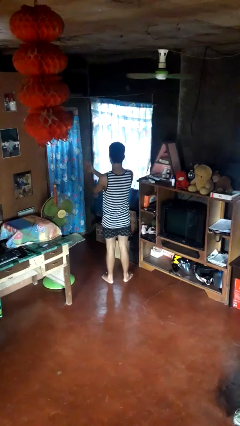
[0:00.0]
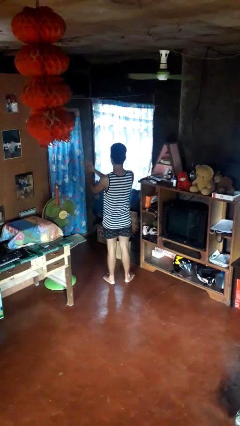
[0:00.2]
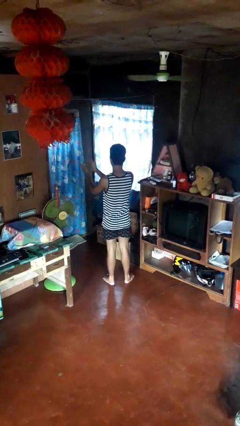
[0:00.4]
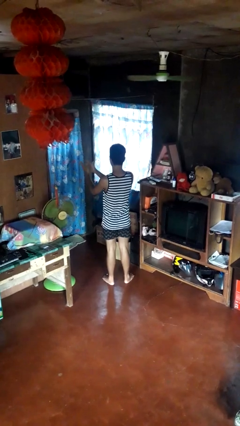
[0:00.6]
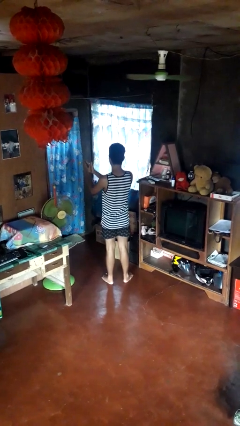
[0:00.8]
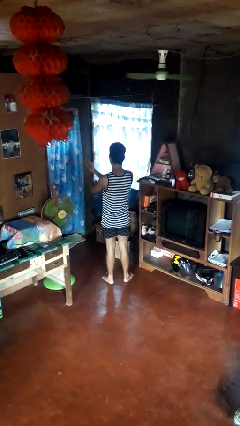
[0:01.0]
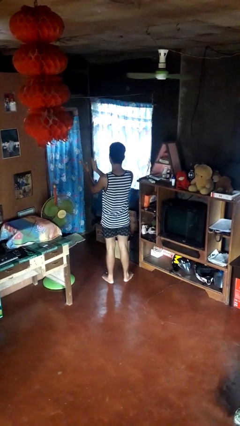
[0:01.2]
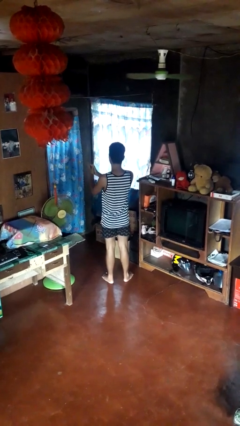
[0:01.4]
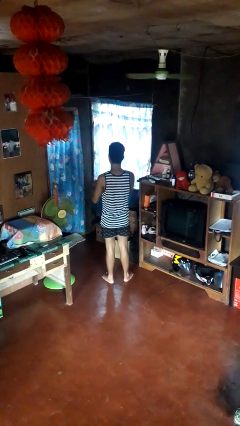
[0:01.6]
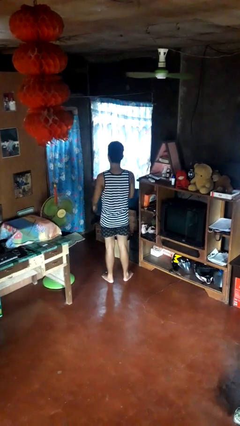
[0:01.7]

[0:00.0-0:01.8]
person claps hands

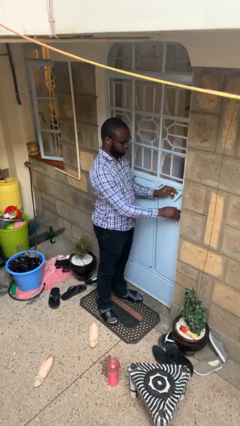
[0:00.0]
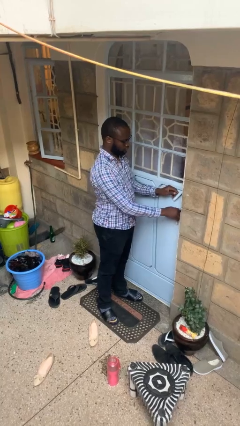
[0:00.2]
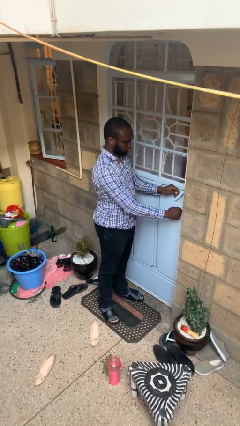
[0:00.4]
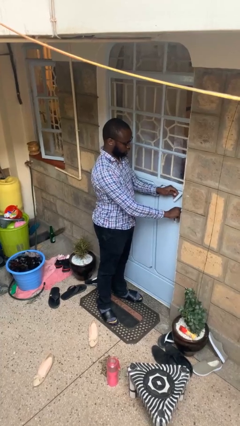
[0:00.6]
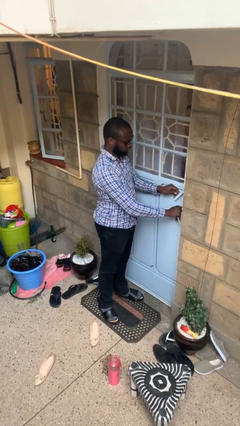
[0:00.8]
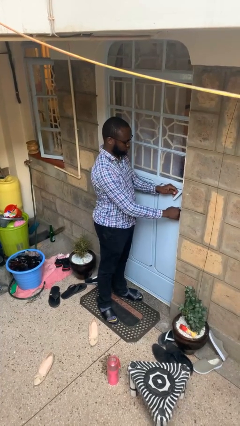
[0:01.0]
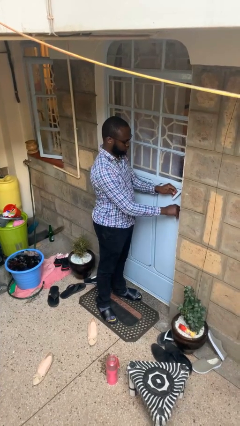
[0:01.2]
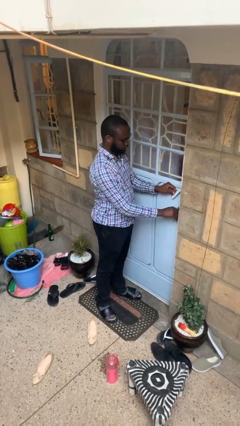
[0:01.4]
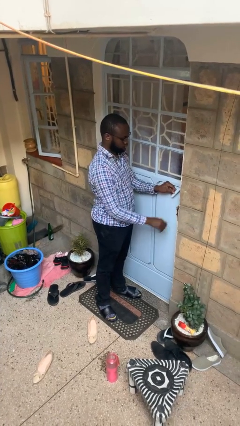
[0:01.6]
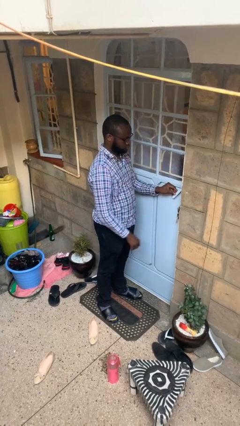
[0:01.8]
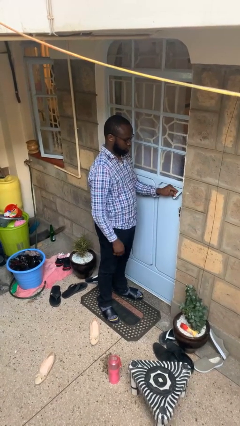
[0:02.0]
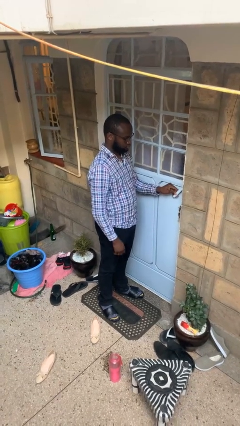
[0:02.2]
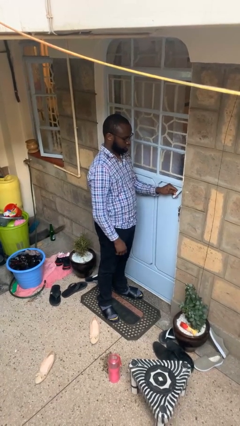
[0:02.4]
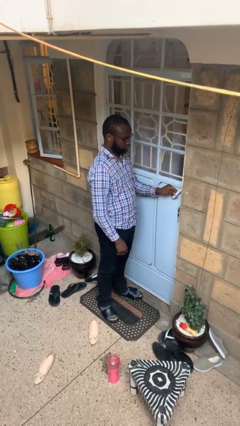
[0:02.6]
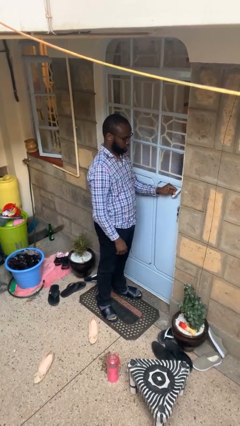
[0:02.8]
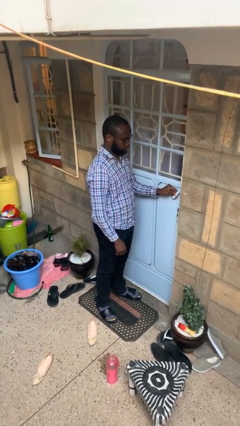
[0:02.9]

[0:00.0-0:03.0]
person unlocks door with keys

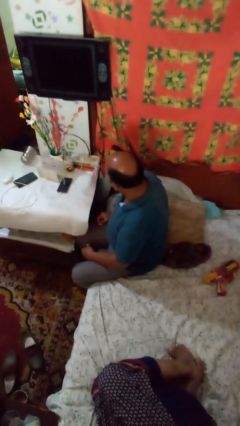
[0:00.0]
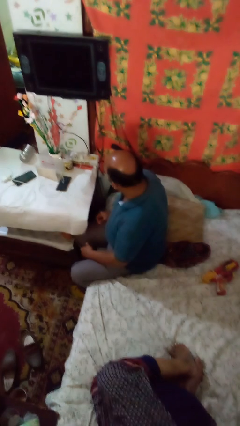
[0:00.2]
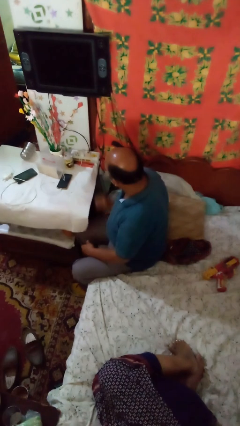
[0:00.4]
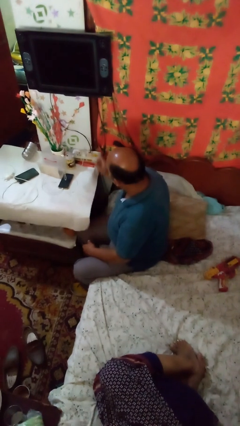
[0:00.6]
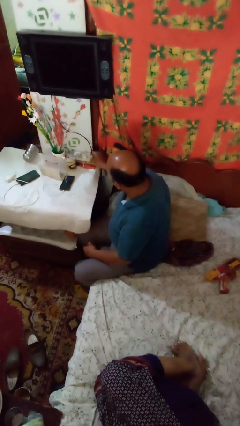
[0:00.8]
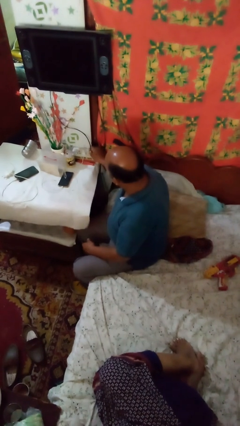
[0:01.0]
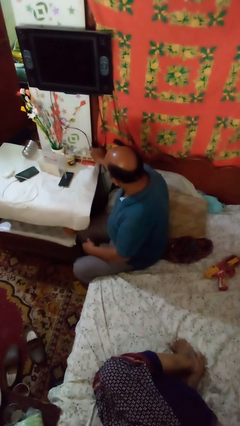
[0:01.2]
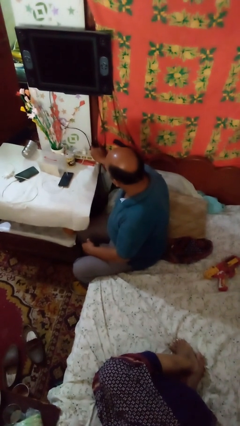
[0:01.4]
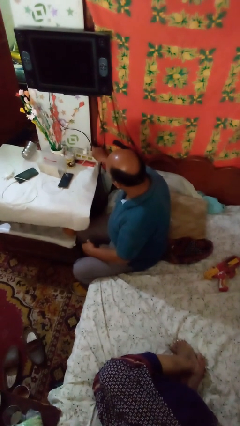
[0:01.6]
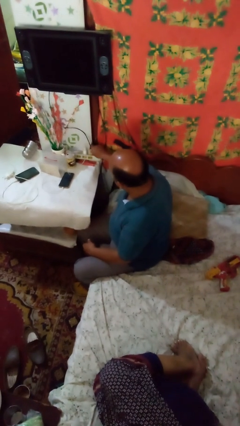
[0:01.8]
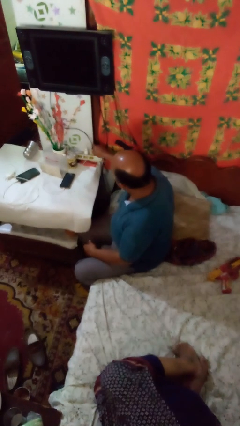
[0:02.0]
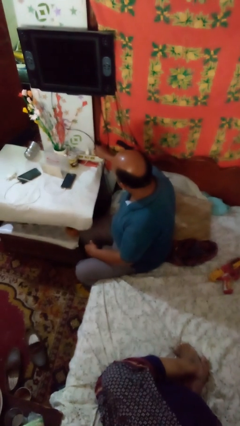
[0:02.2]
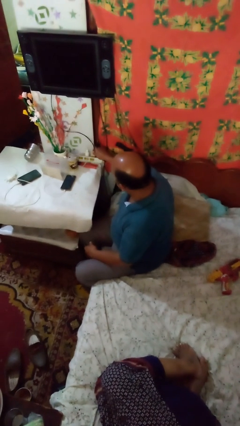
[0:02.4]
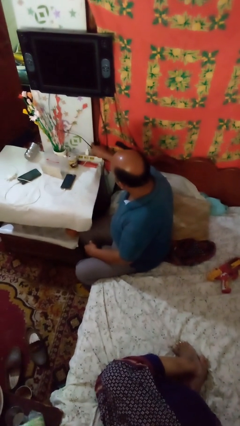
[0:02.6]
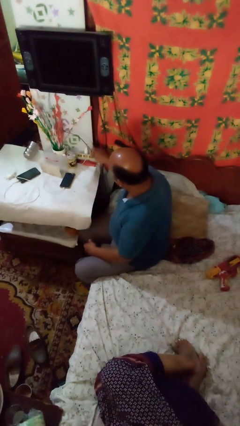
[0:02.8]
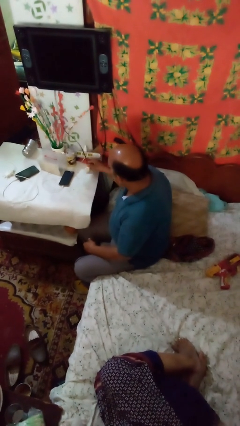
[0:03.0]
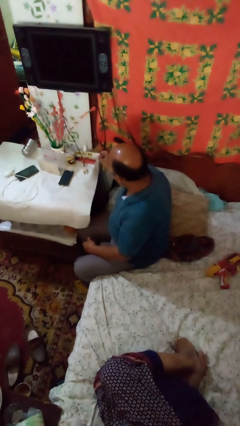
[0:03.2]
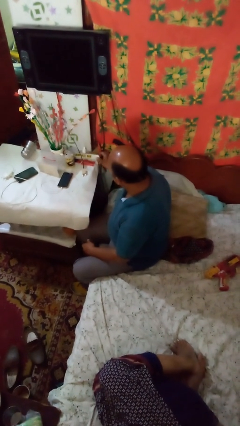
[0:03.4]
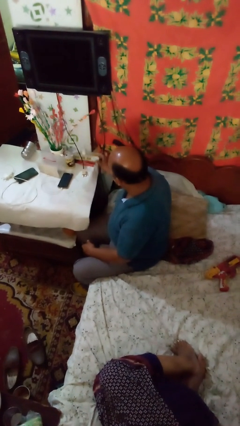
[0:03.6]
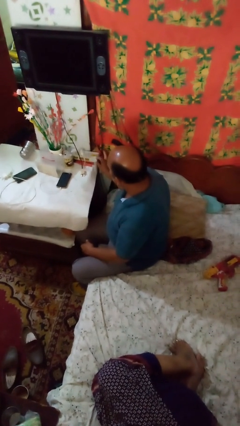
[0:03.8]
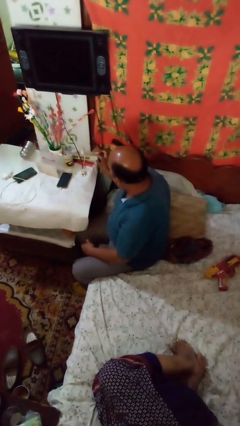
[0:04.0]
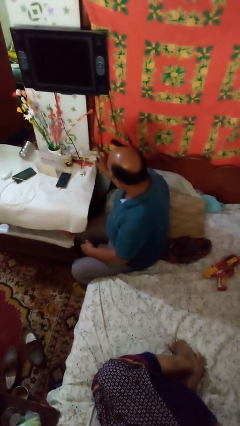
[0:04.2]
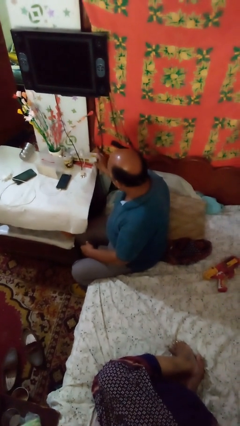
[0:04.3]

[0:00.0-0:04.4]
person unplugs from electrical socket

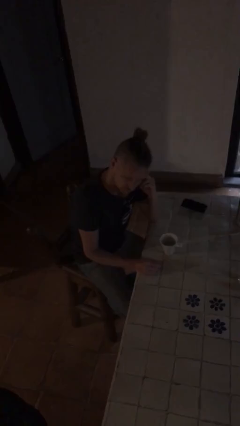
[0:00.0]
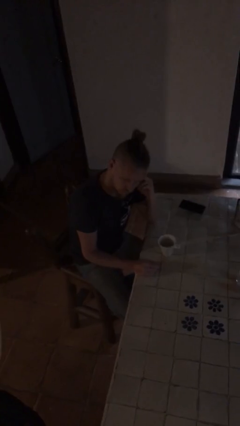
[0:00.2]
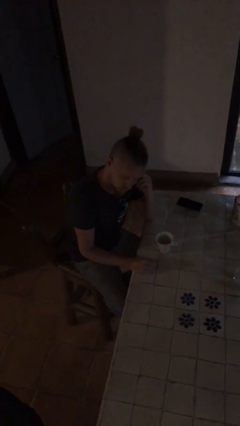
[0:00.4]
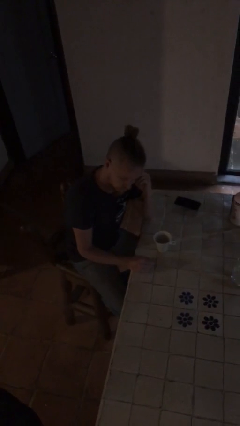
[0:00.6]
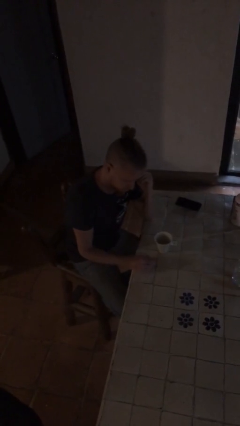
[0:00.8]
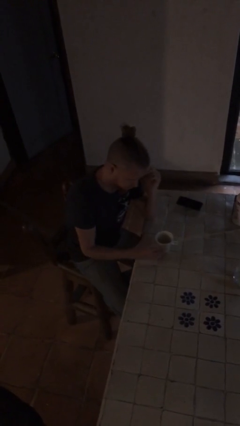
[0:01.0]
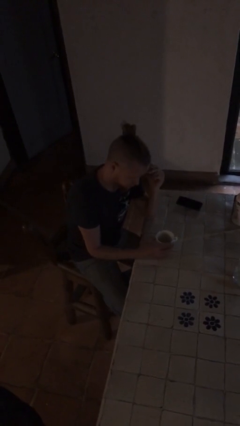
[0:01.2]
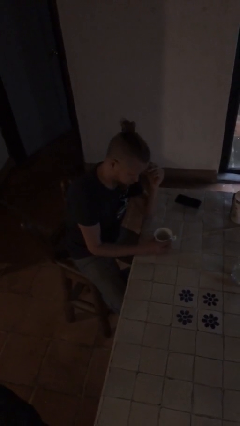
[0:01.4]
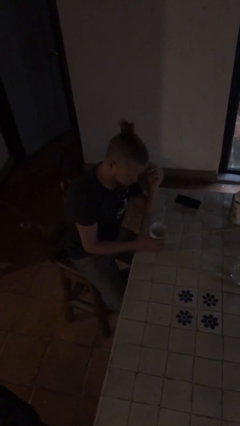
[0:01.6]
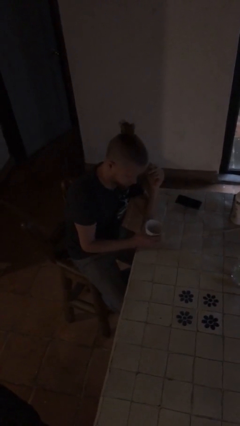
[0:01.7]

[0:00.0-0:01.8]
person picks up object from table

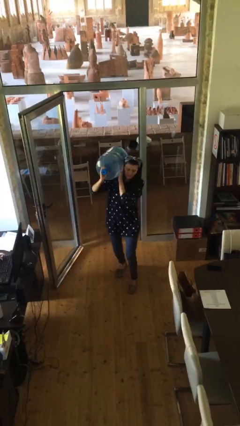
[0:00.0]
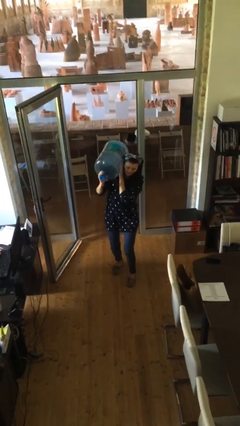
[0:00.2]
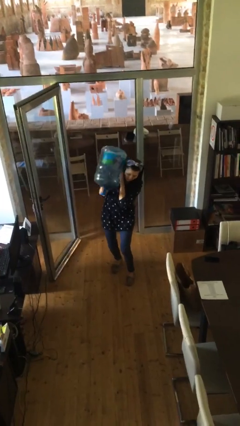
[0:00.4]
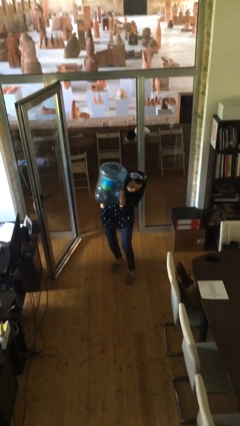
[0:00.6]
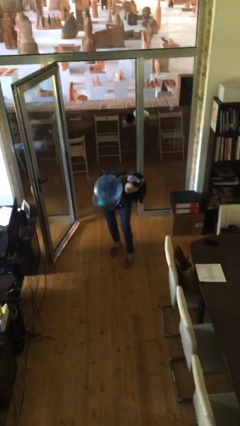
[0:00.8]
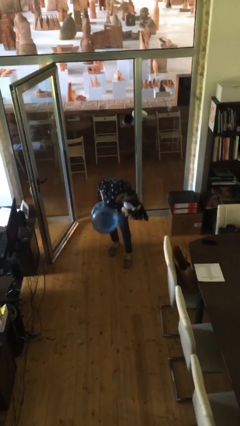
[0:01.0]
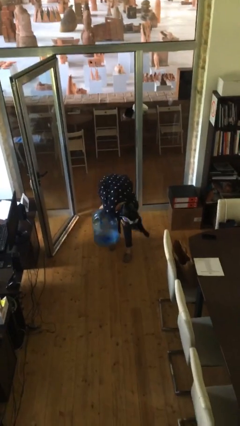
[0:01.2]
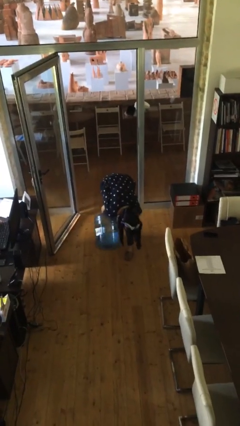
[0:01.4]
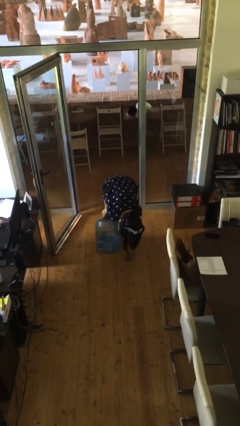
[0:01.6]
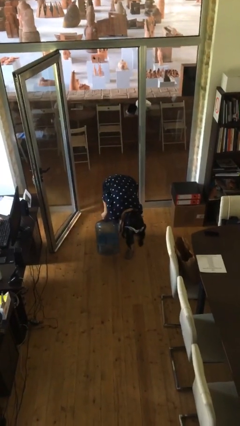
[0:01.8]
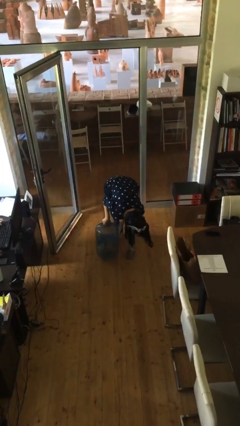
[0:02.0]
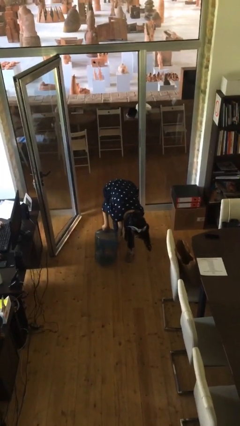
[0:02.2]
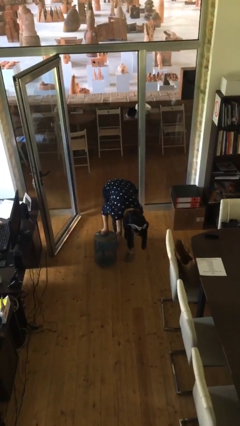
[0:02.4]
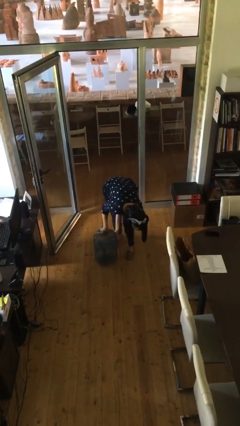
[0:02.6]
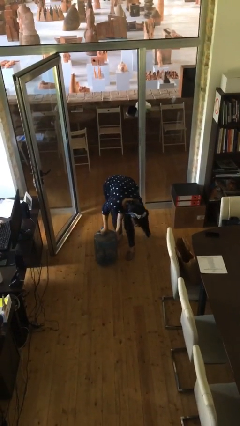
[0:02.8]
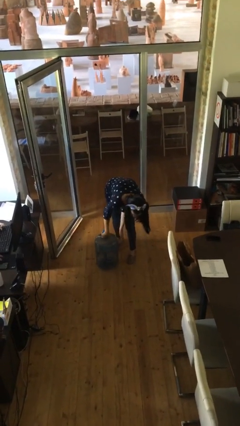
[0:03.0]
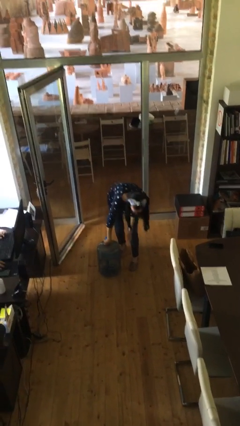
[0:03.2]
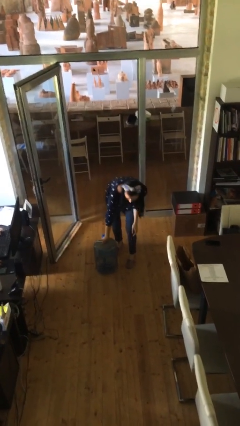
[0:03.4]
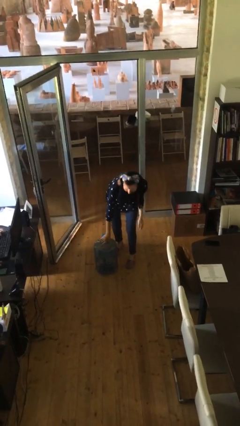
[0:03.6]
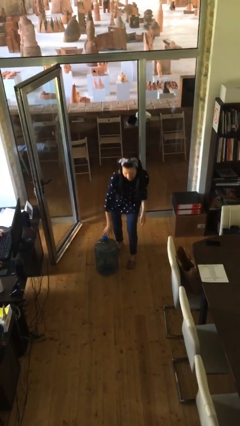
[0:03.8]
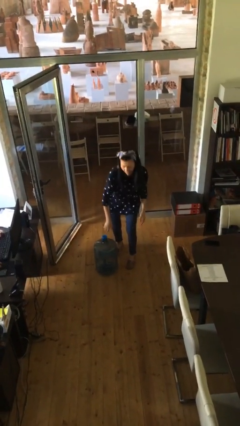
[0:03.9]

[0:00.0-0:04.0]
person puts down object on floor

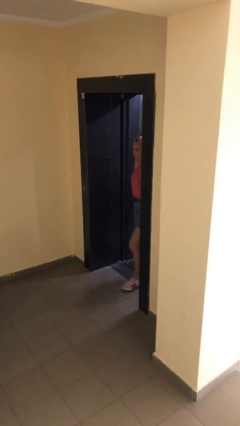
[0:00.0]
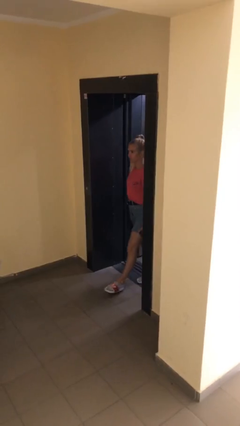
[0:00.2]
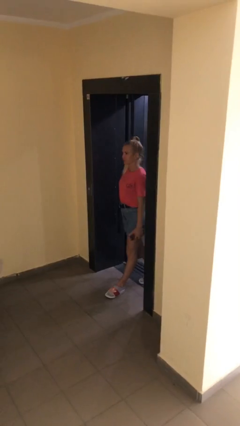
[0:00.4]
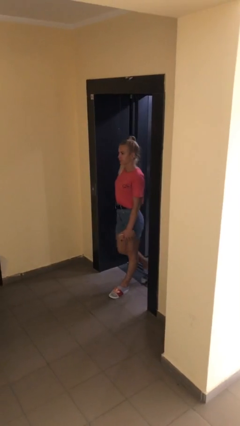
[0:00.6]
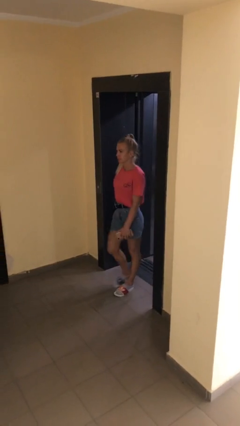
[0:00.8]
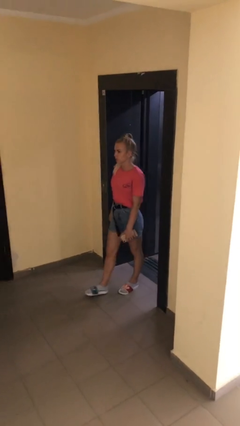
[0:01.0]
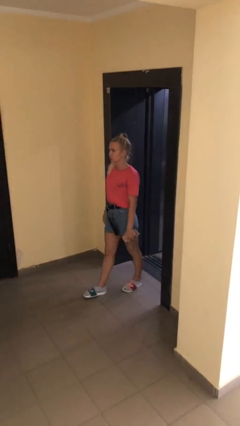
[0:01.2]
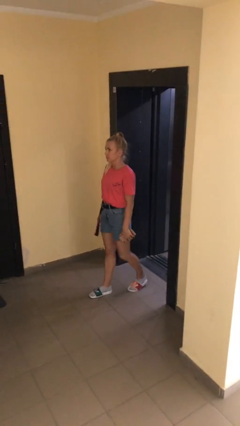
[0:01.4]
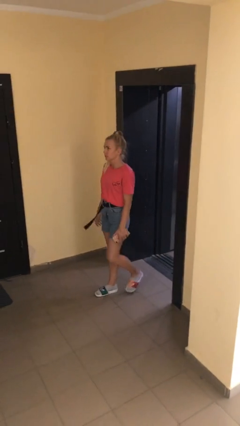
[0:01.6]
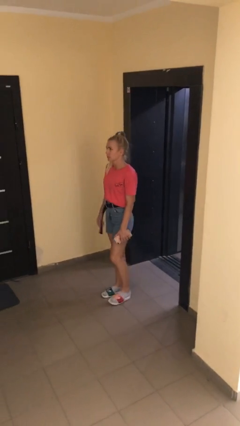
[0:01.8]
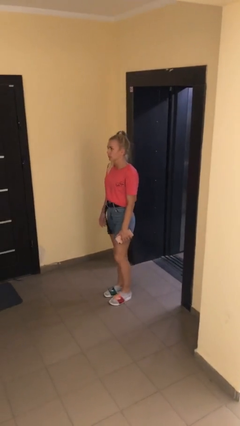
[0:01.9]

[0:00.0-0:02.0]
person enters scene through structure

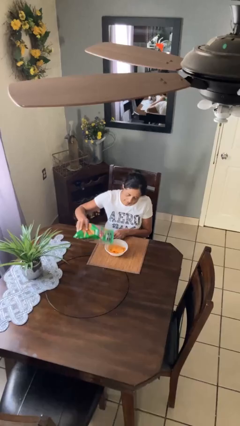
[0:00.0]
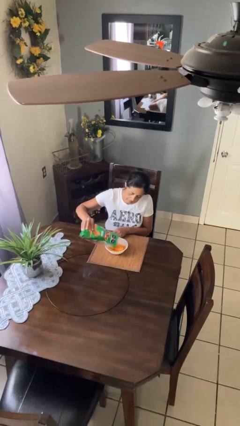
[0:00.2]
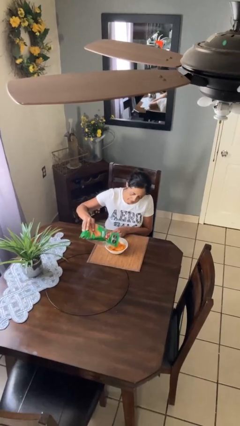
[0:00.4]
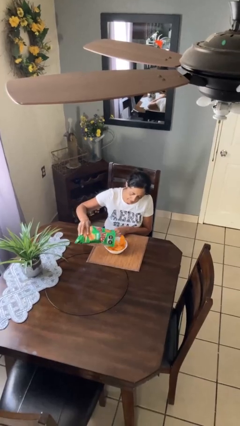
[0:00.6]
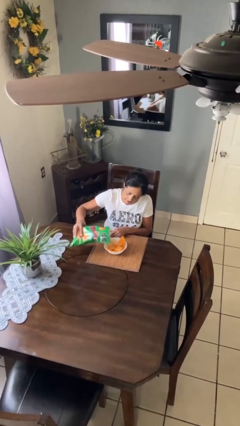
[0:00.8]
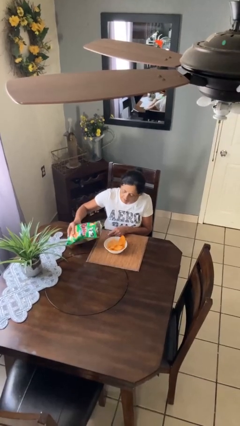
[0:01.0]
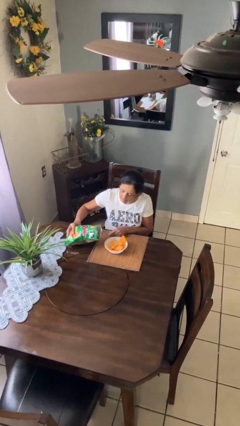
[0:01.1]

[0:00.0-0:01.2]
person pours into bowl
